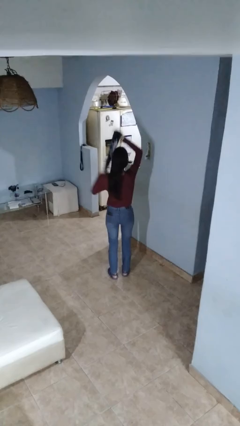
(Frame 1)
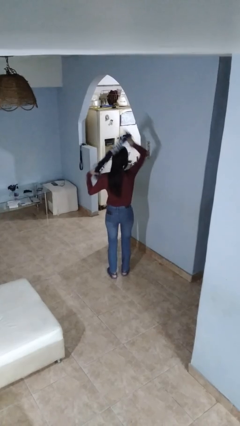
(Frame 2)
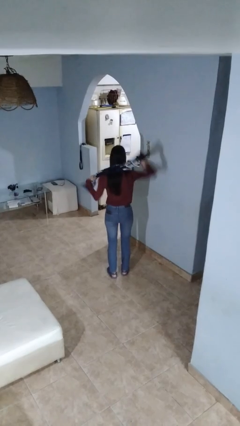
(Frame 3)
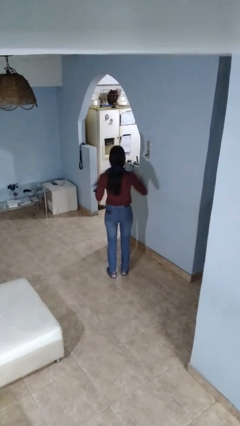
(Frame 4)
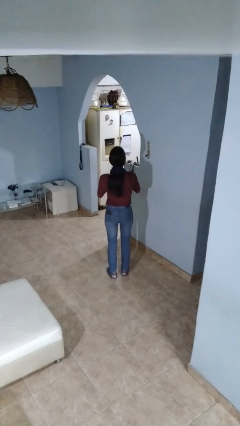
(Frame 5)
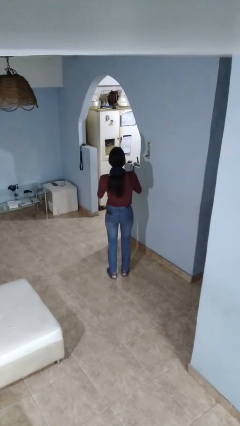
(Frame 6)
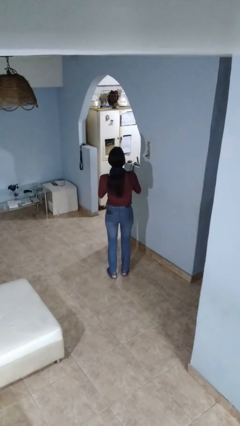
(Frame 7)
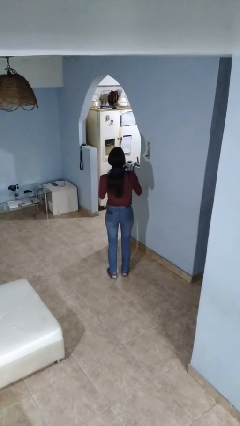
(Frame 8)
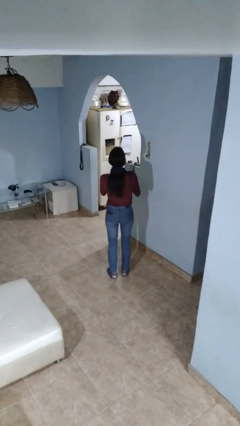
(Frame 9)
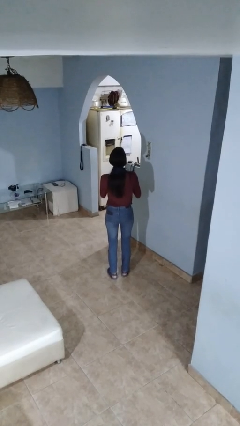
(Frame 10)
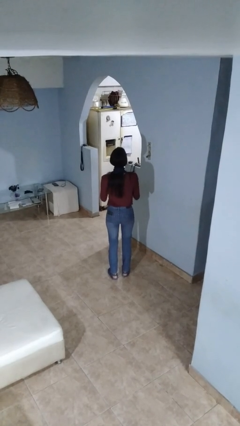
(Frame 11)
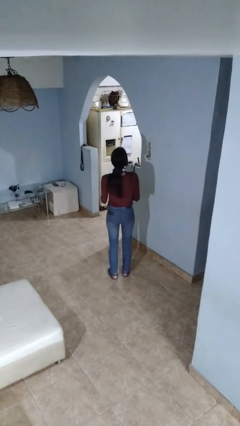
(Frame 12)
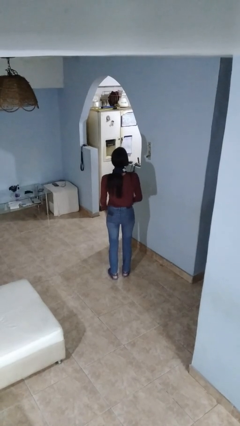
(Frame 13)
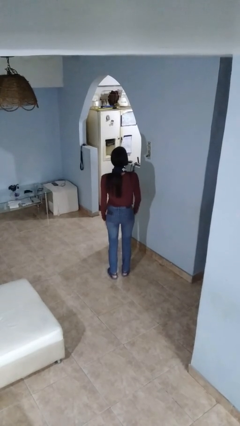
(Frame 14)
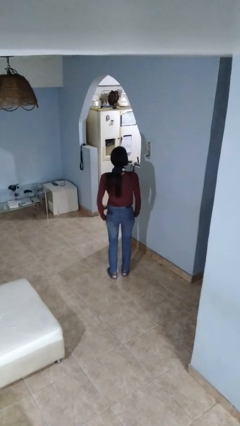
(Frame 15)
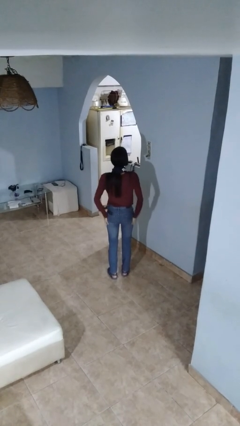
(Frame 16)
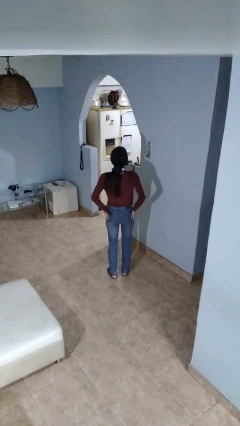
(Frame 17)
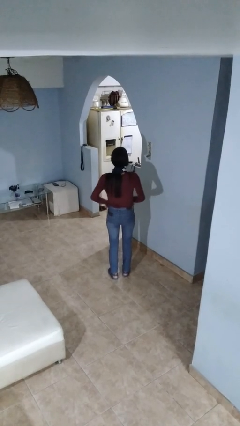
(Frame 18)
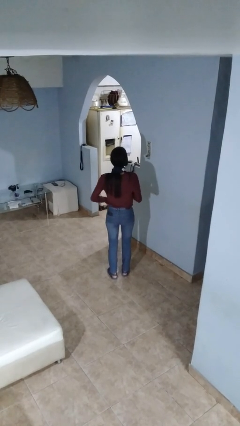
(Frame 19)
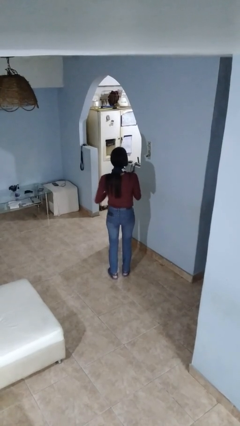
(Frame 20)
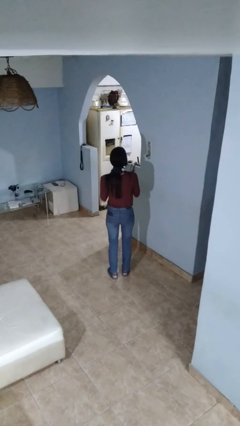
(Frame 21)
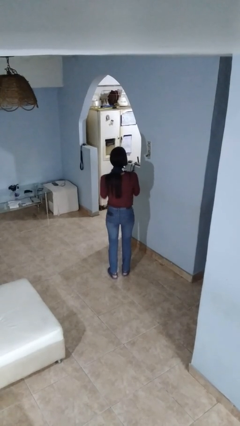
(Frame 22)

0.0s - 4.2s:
person puts on scarf

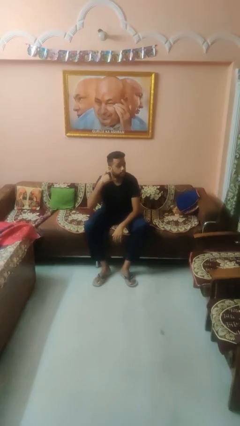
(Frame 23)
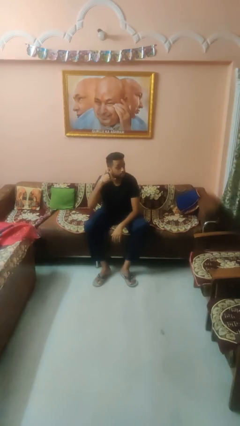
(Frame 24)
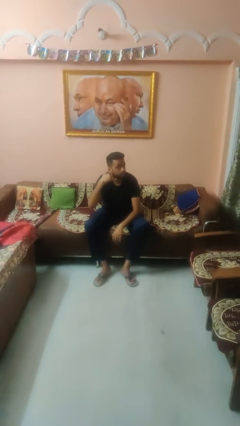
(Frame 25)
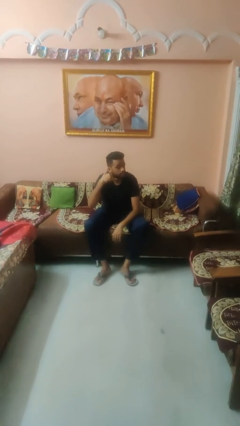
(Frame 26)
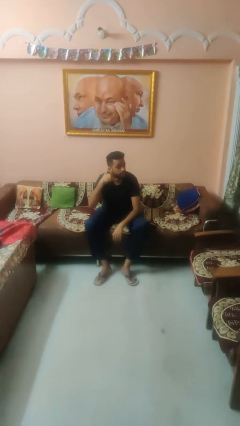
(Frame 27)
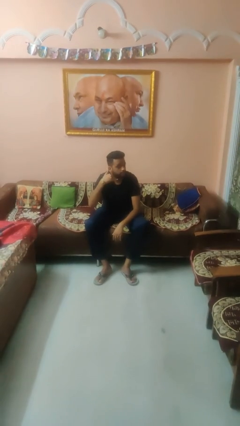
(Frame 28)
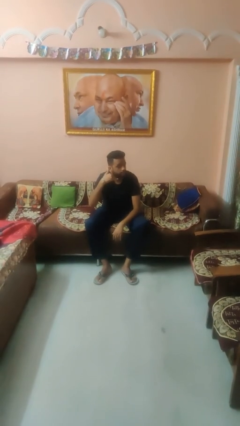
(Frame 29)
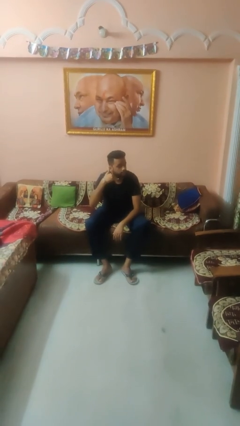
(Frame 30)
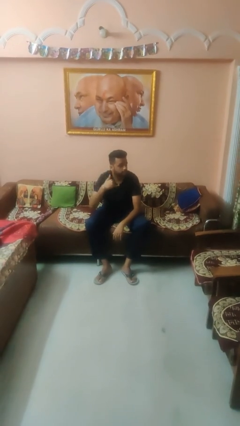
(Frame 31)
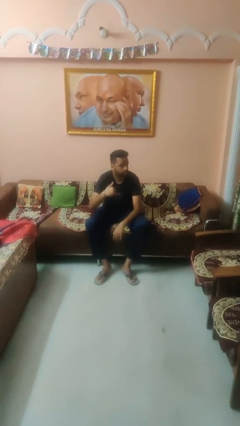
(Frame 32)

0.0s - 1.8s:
person gestures call me

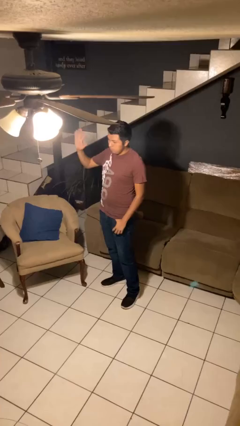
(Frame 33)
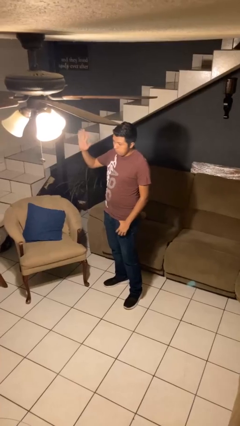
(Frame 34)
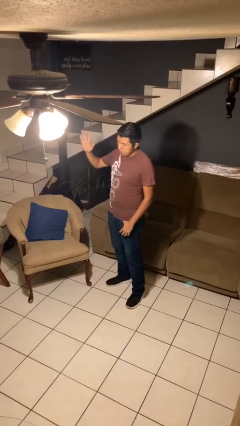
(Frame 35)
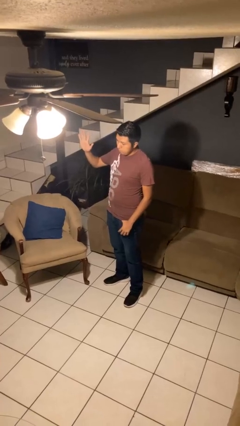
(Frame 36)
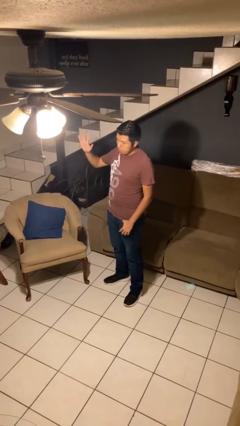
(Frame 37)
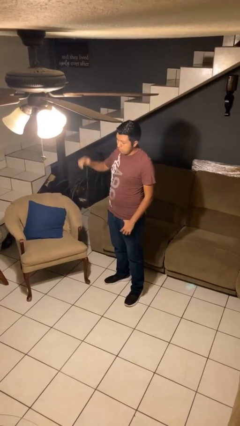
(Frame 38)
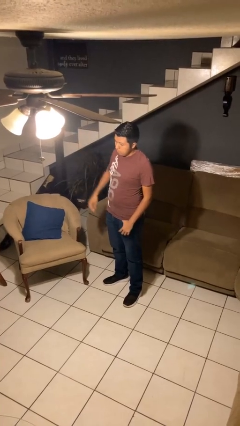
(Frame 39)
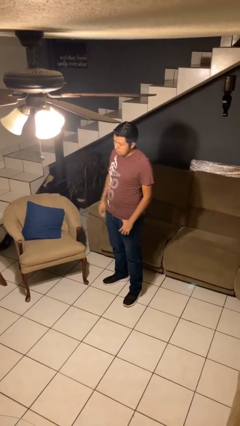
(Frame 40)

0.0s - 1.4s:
person waves at person

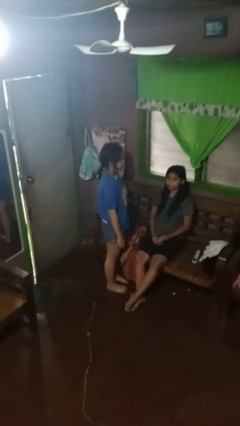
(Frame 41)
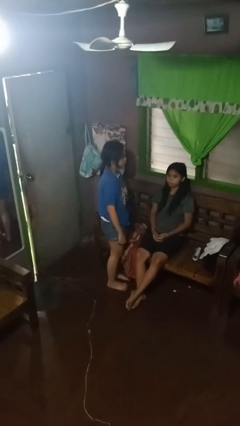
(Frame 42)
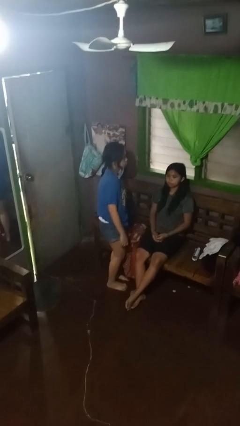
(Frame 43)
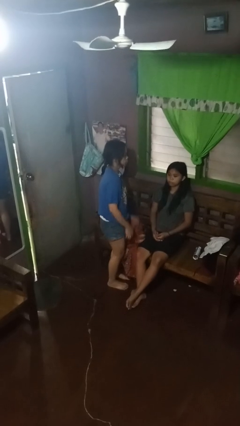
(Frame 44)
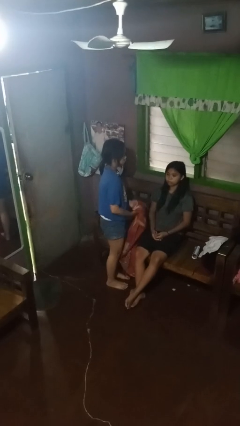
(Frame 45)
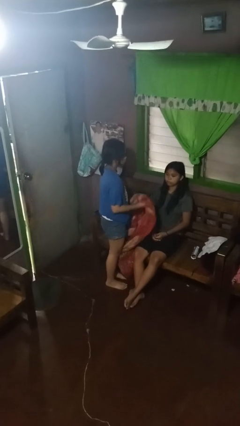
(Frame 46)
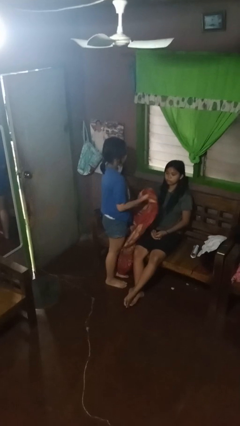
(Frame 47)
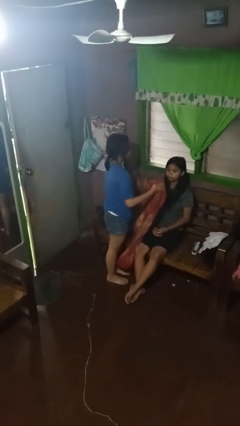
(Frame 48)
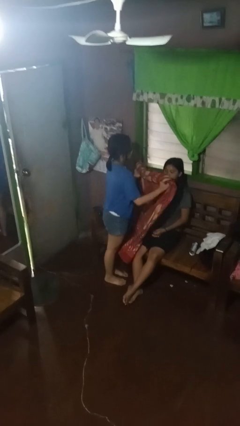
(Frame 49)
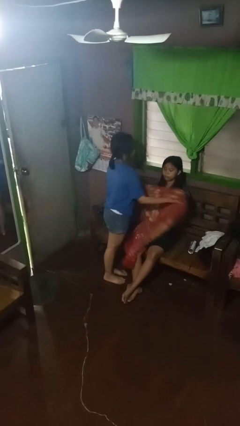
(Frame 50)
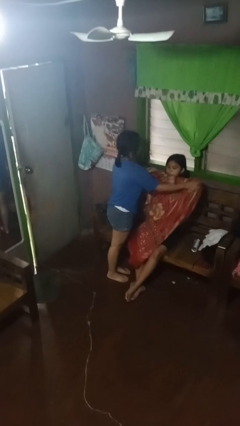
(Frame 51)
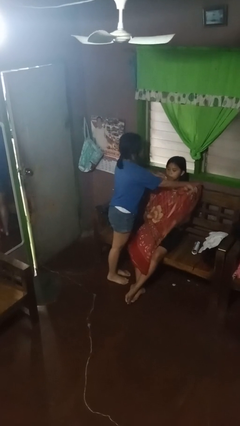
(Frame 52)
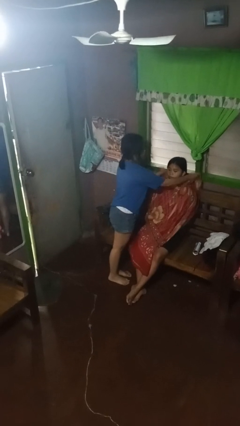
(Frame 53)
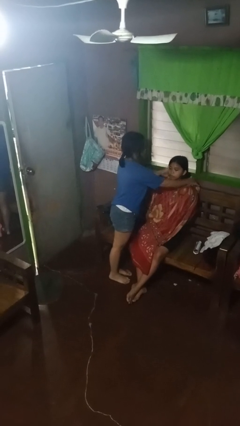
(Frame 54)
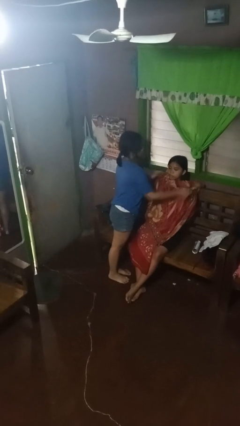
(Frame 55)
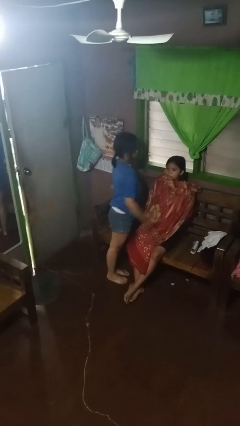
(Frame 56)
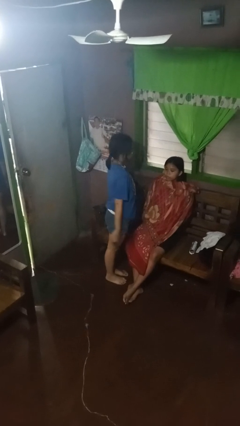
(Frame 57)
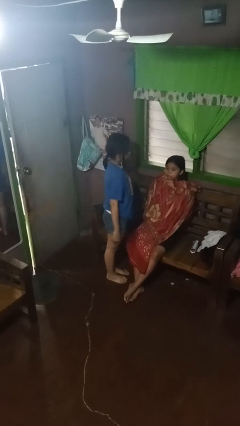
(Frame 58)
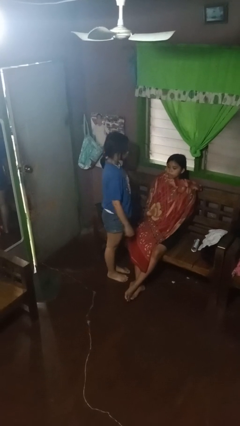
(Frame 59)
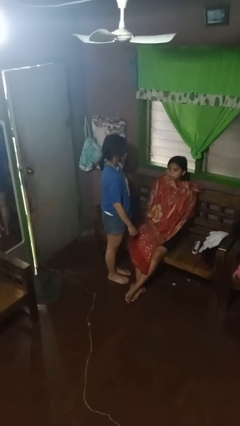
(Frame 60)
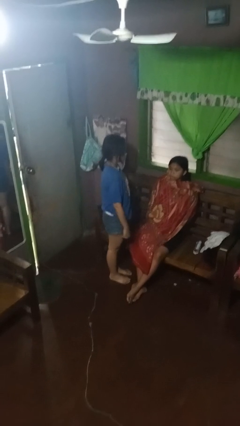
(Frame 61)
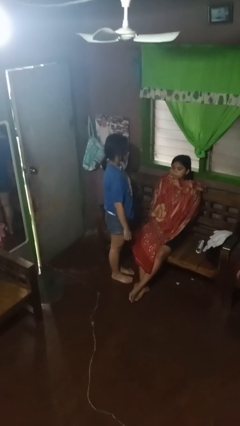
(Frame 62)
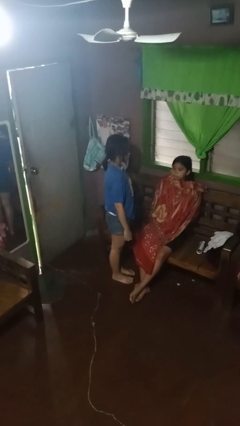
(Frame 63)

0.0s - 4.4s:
person covers friend with blanket

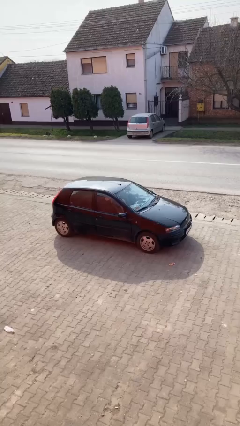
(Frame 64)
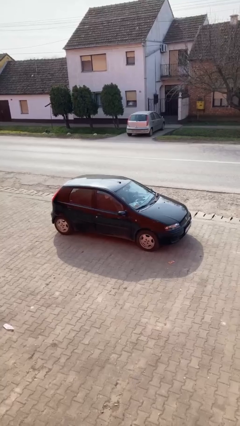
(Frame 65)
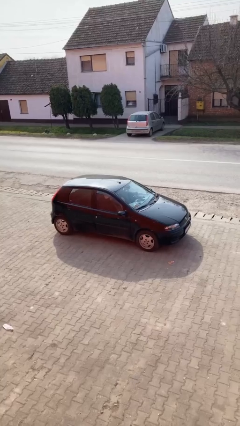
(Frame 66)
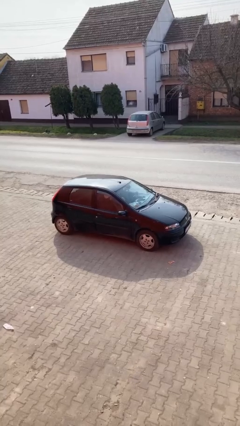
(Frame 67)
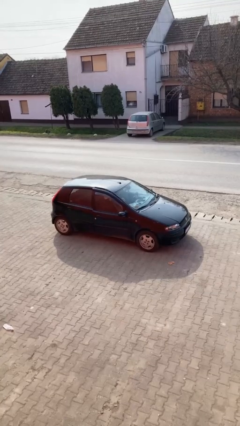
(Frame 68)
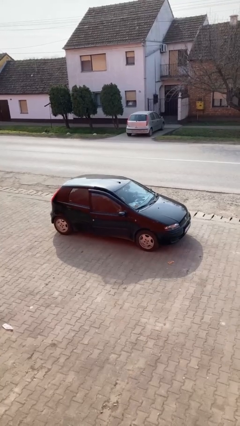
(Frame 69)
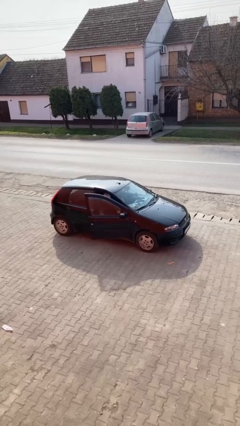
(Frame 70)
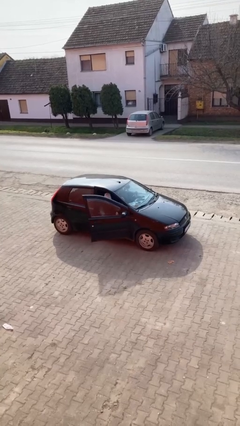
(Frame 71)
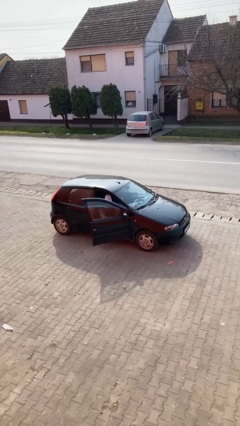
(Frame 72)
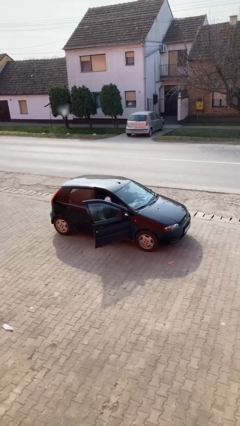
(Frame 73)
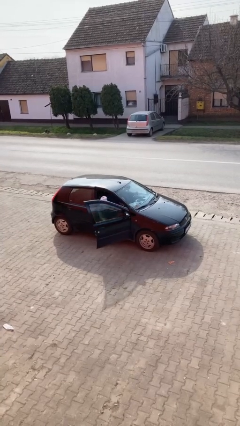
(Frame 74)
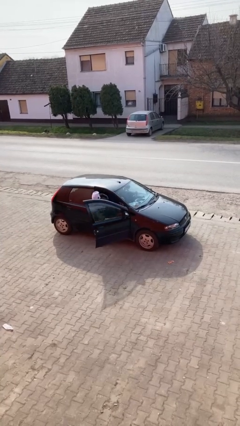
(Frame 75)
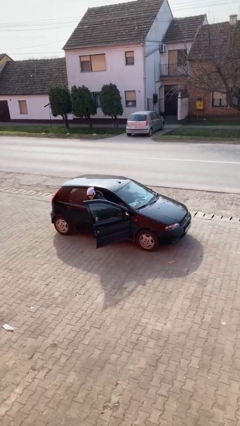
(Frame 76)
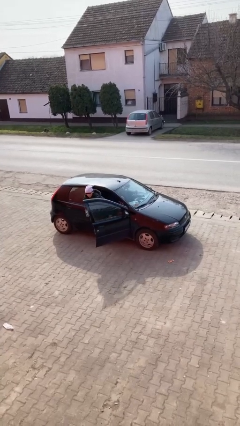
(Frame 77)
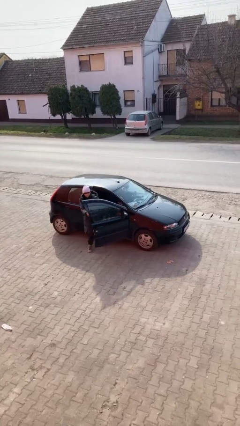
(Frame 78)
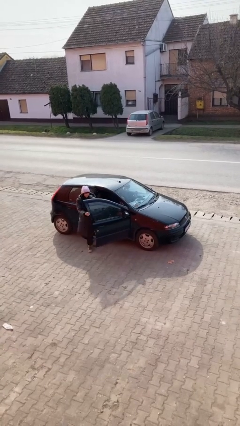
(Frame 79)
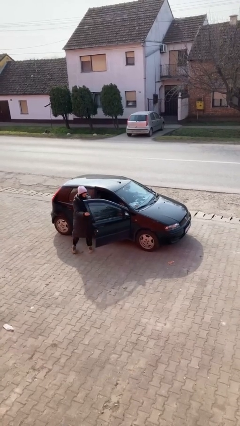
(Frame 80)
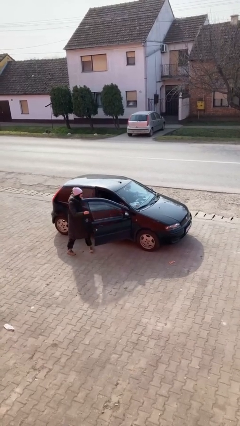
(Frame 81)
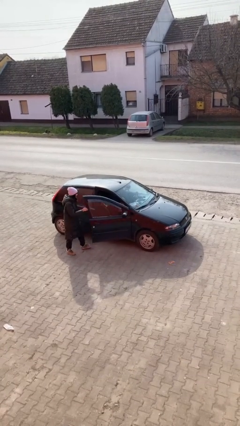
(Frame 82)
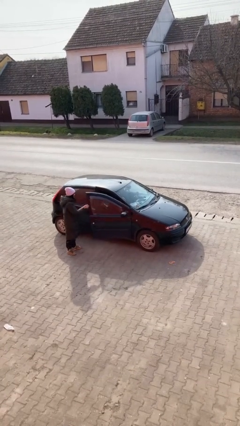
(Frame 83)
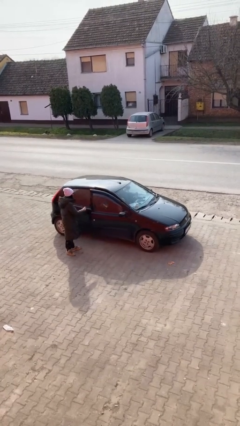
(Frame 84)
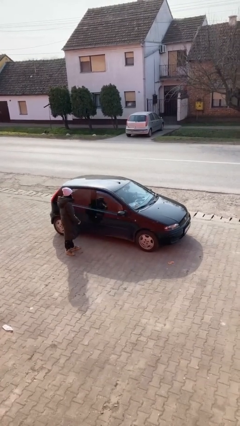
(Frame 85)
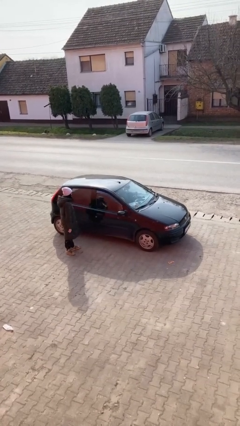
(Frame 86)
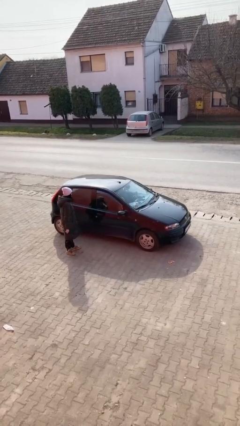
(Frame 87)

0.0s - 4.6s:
car drops off person

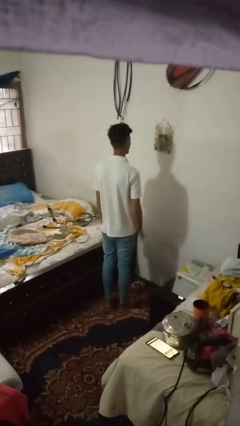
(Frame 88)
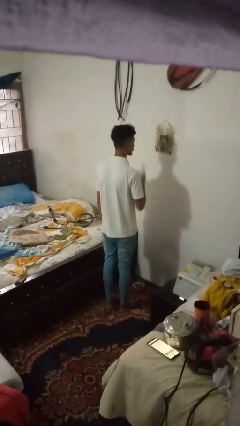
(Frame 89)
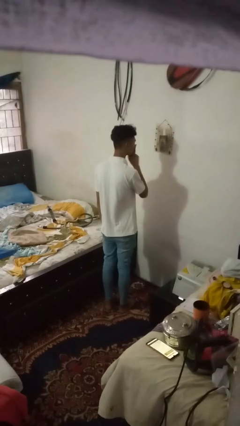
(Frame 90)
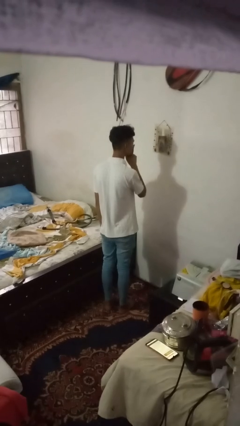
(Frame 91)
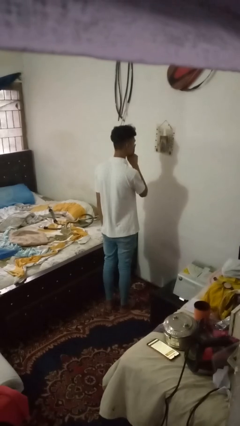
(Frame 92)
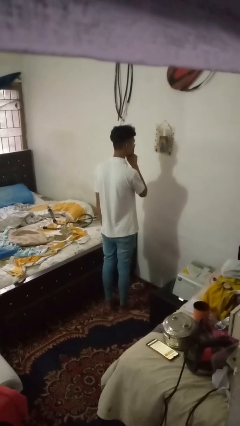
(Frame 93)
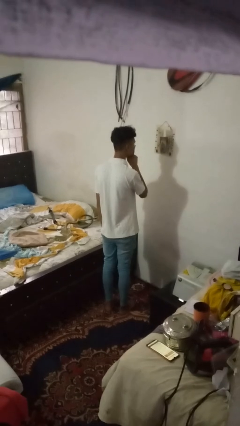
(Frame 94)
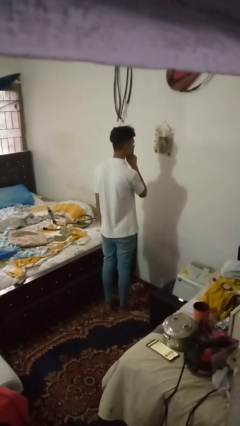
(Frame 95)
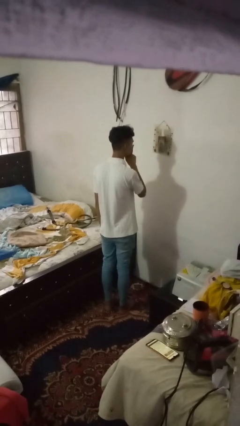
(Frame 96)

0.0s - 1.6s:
person gestures be quiet
